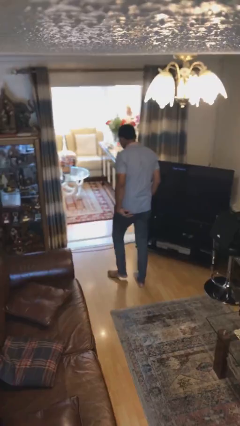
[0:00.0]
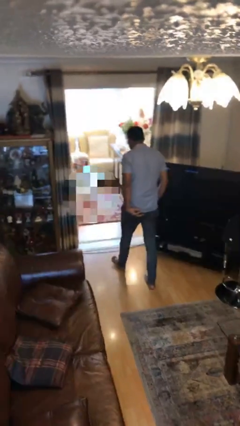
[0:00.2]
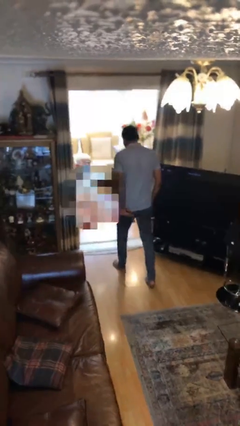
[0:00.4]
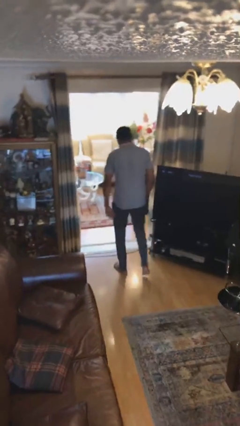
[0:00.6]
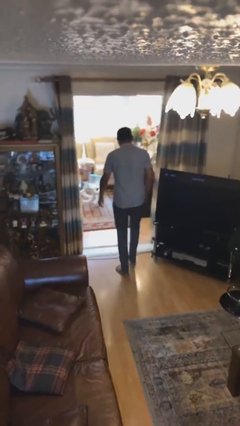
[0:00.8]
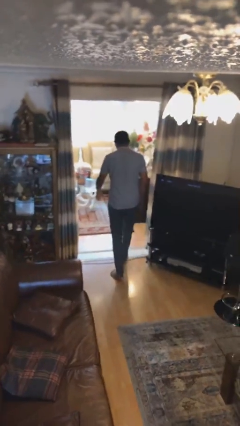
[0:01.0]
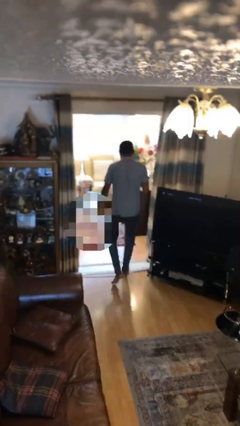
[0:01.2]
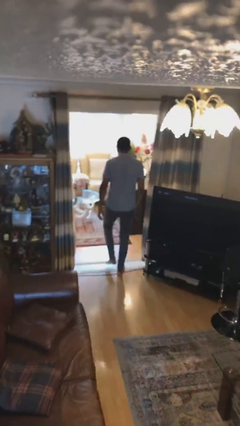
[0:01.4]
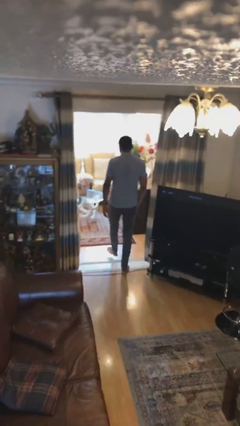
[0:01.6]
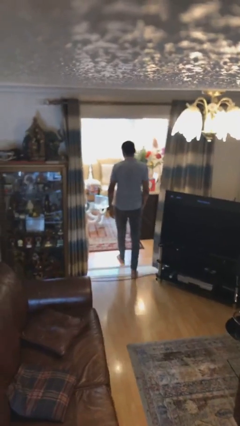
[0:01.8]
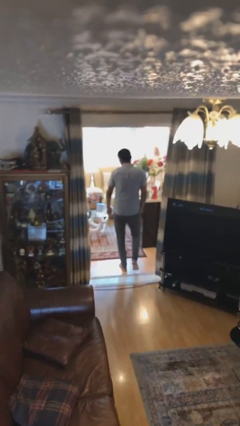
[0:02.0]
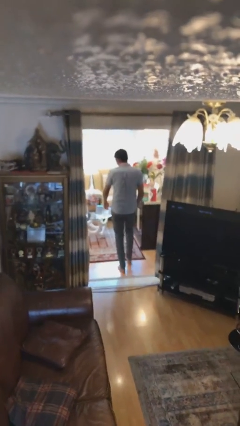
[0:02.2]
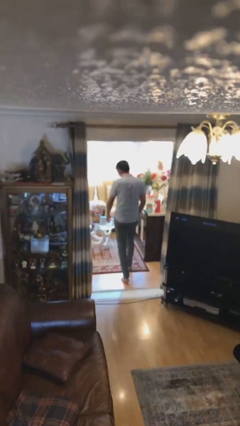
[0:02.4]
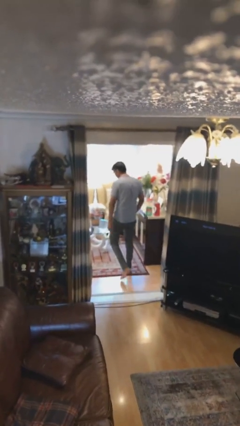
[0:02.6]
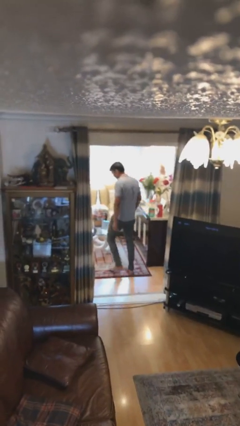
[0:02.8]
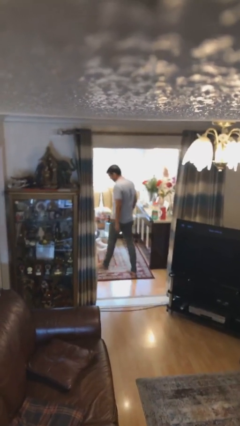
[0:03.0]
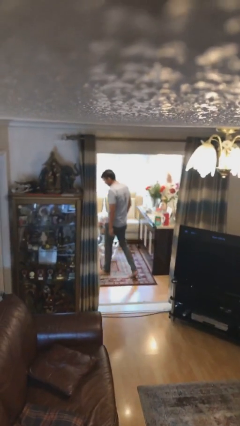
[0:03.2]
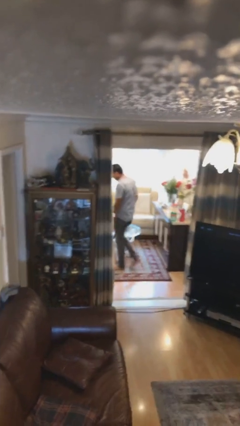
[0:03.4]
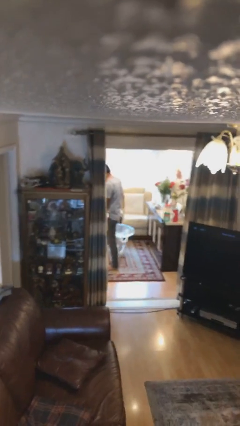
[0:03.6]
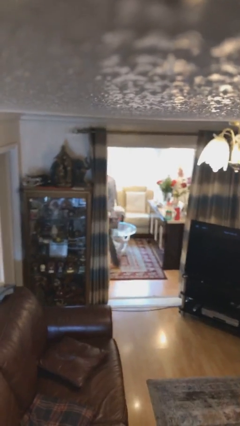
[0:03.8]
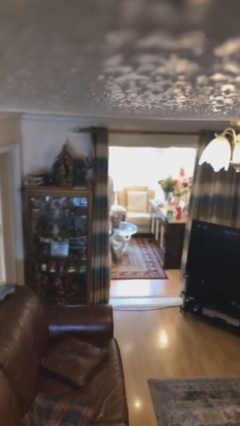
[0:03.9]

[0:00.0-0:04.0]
person exits scene through structure

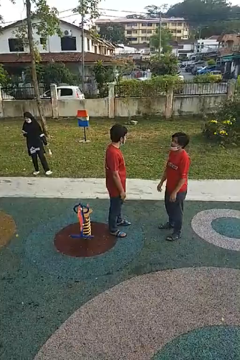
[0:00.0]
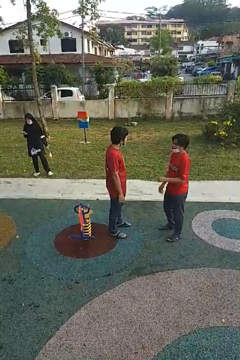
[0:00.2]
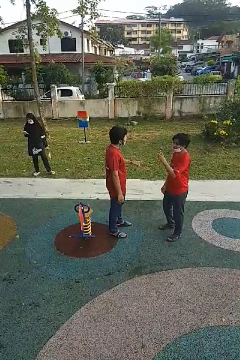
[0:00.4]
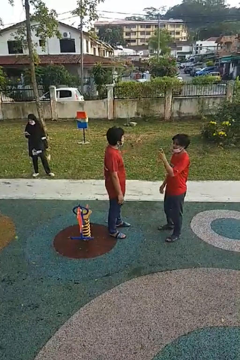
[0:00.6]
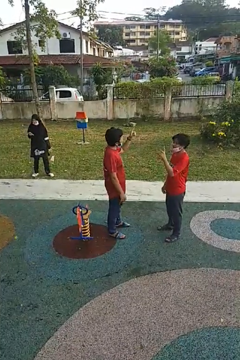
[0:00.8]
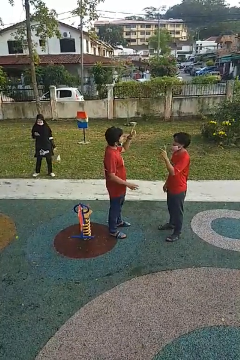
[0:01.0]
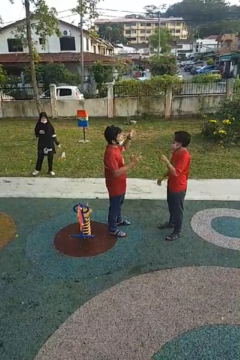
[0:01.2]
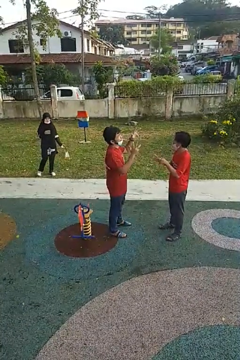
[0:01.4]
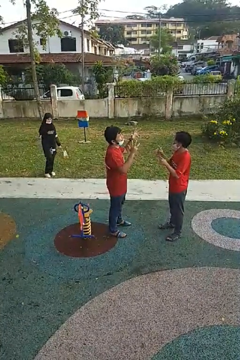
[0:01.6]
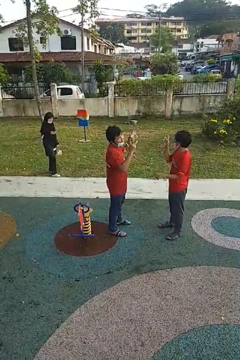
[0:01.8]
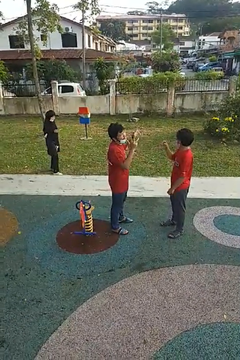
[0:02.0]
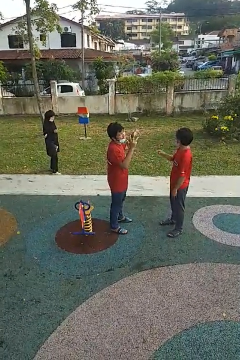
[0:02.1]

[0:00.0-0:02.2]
person talks to person

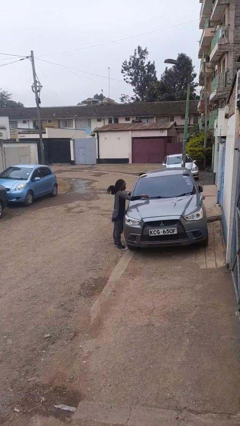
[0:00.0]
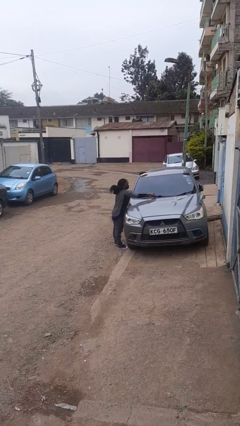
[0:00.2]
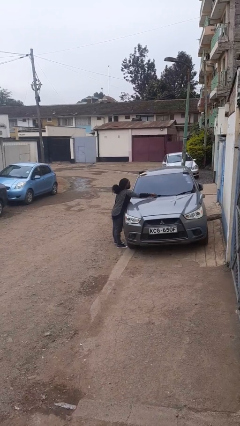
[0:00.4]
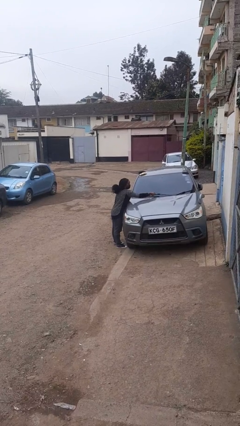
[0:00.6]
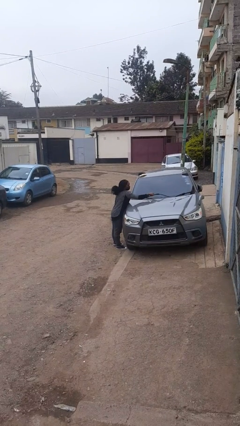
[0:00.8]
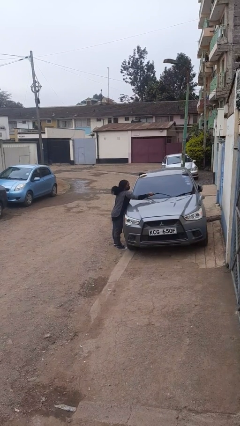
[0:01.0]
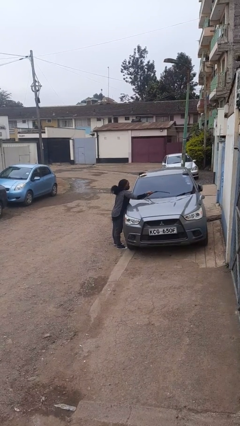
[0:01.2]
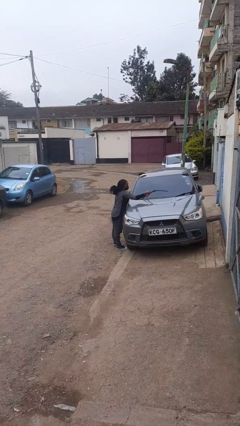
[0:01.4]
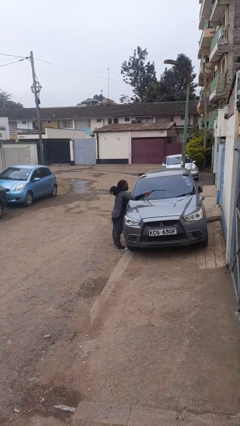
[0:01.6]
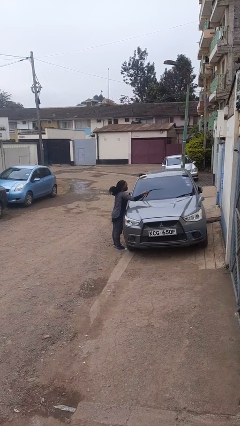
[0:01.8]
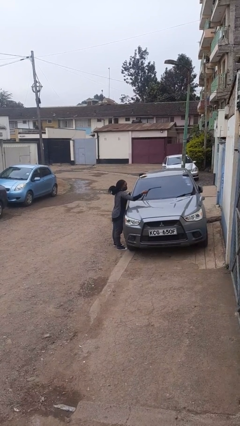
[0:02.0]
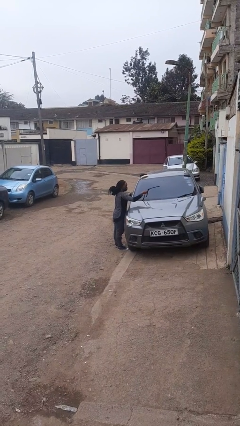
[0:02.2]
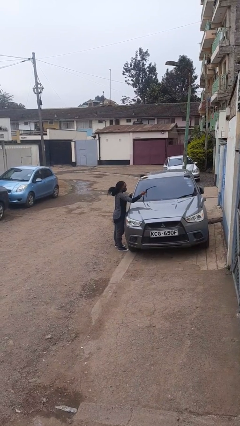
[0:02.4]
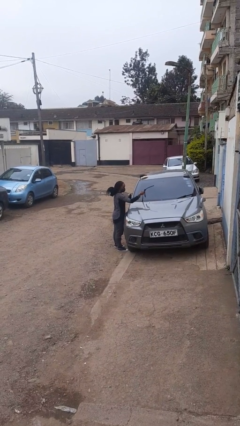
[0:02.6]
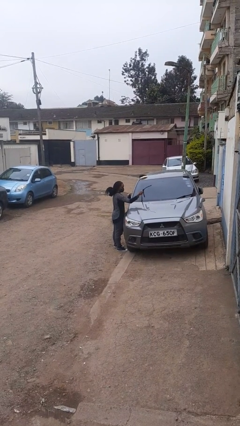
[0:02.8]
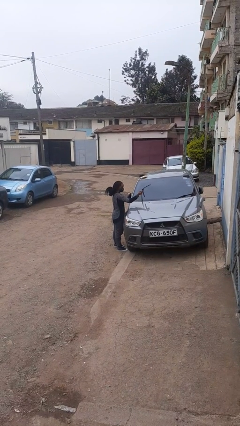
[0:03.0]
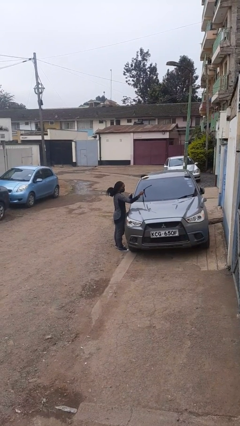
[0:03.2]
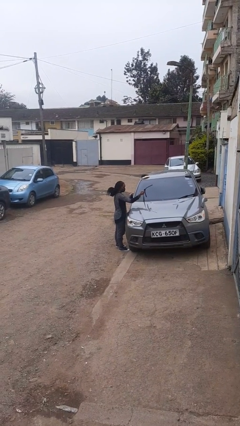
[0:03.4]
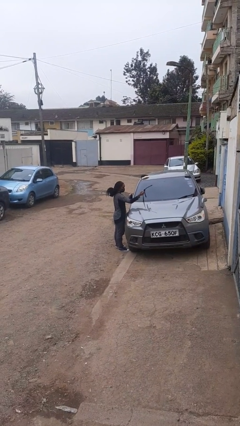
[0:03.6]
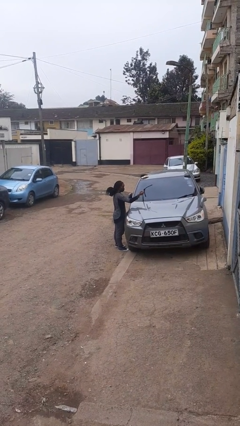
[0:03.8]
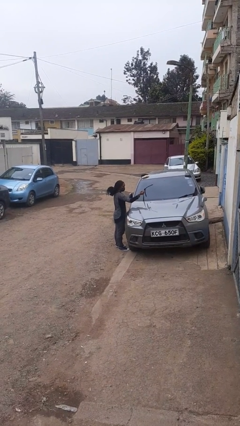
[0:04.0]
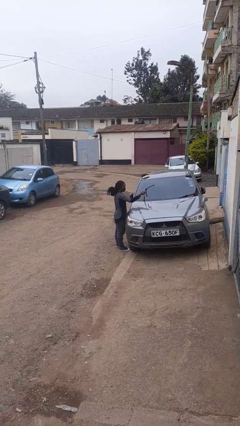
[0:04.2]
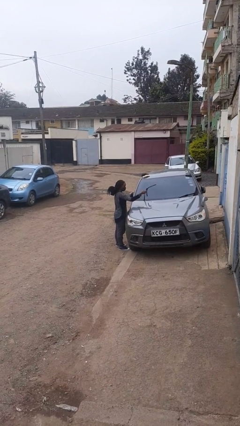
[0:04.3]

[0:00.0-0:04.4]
person flips up car wipers

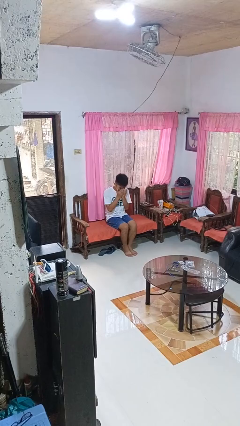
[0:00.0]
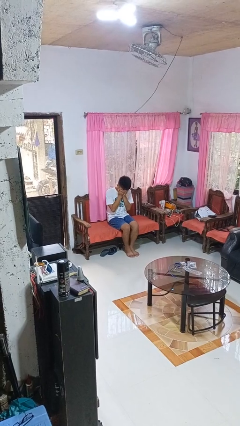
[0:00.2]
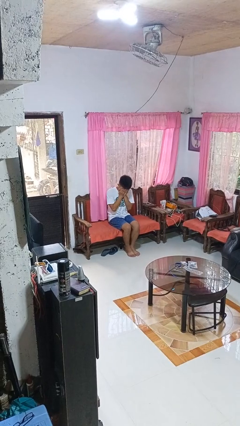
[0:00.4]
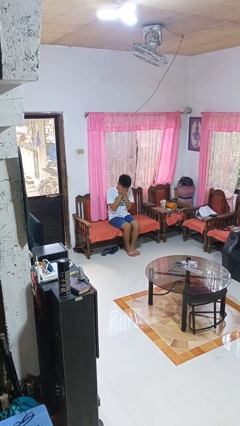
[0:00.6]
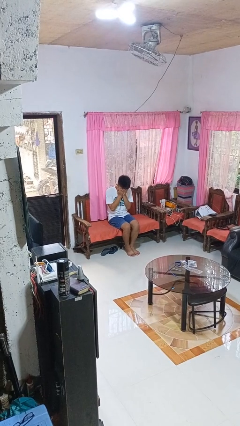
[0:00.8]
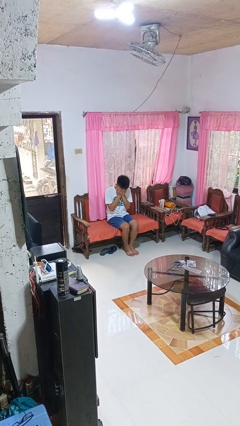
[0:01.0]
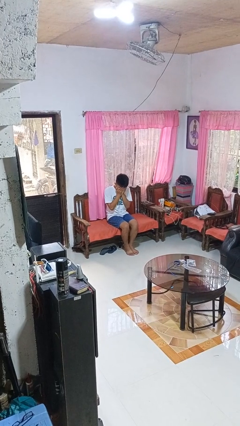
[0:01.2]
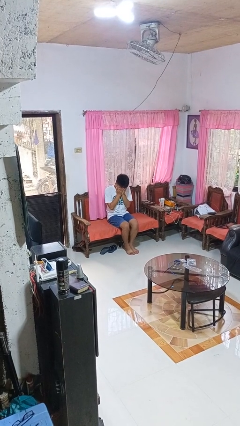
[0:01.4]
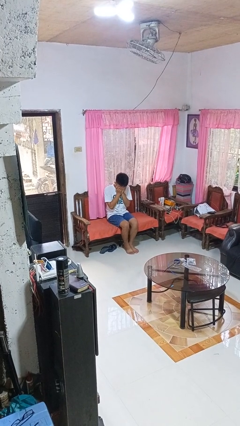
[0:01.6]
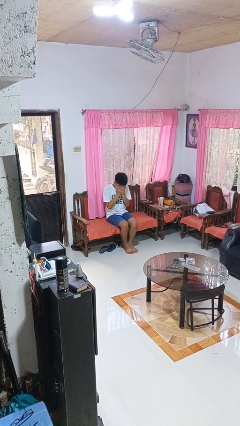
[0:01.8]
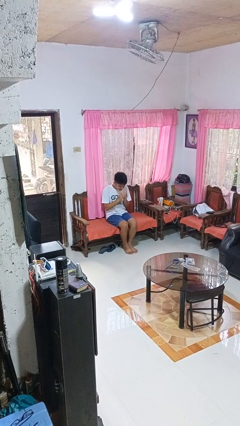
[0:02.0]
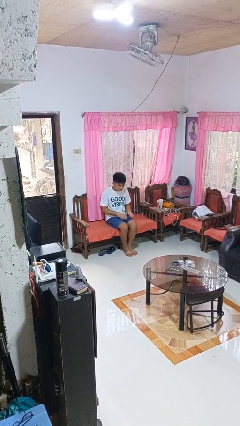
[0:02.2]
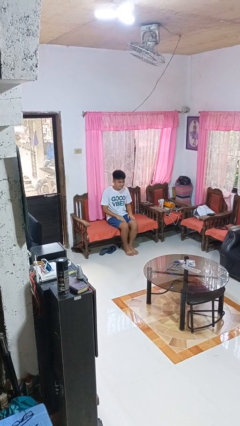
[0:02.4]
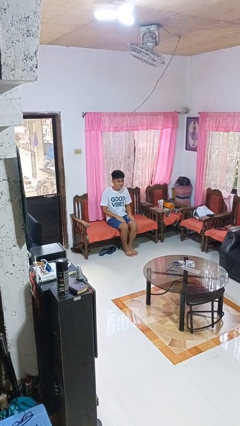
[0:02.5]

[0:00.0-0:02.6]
person covers face with hands

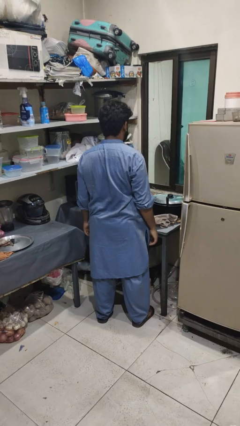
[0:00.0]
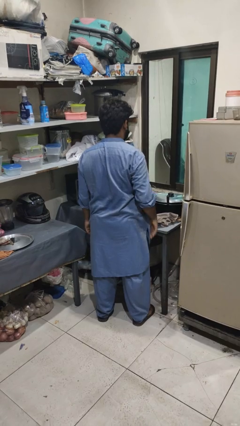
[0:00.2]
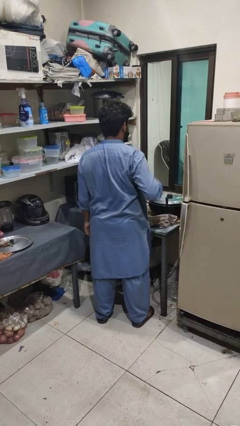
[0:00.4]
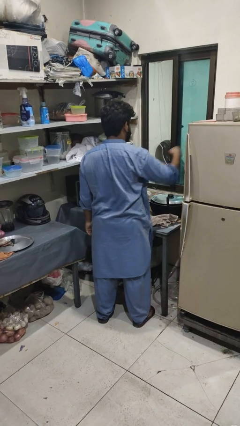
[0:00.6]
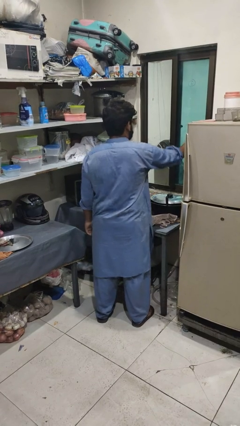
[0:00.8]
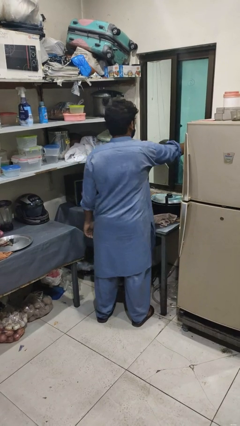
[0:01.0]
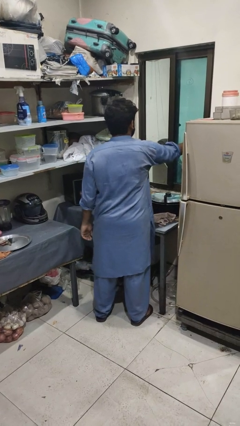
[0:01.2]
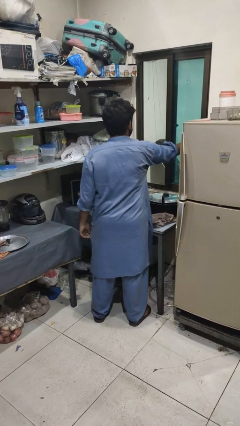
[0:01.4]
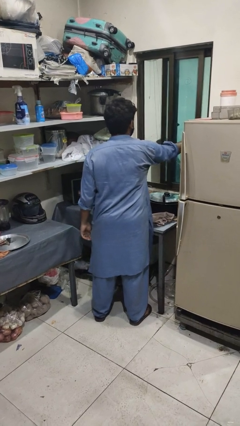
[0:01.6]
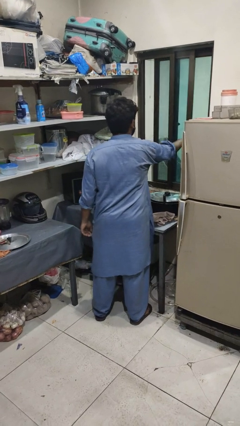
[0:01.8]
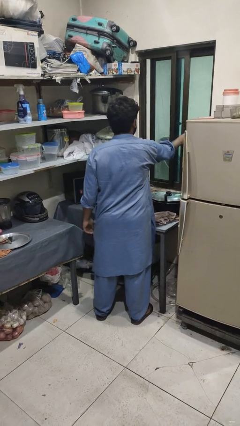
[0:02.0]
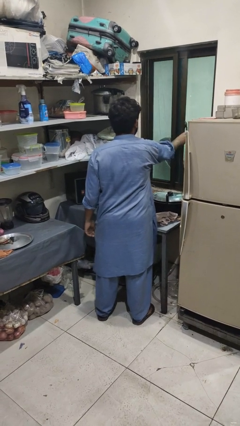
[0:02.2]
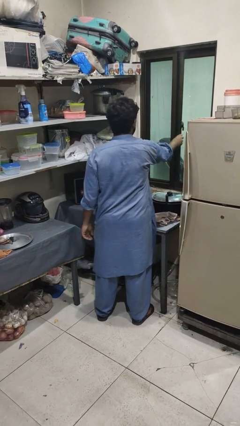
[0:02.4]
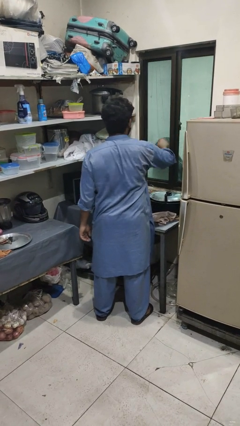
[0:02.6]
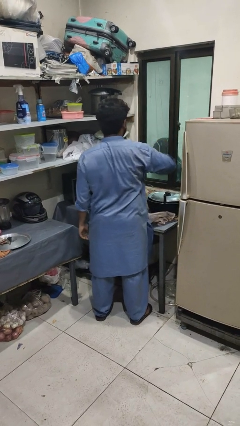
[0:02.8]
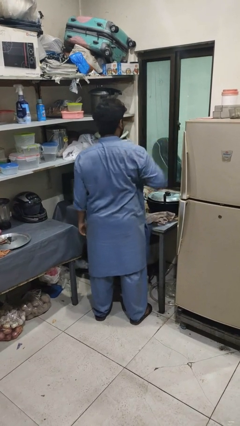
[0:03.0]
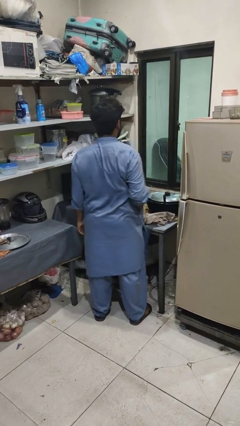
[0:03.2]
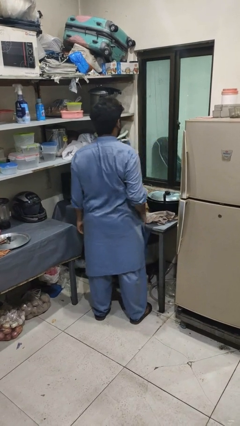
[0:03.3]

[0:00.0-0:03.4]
person closes home window

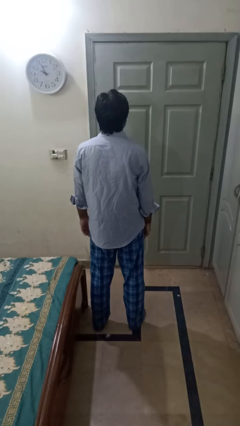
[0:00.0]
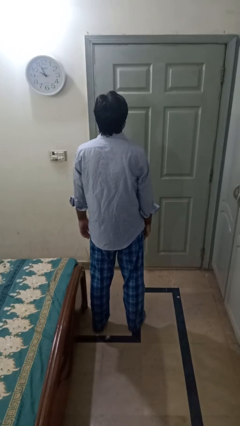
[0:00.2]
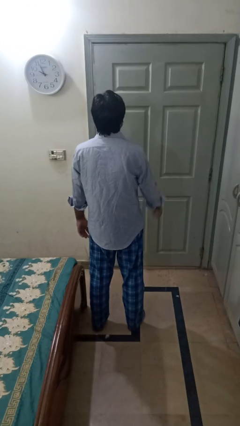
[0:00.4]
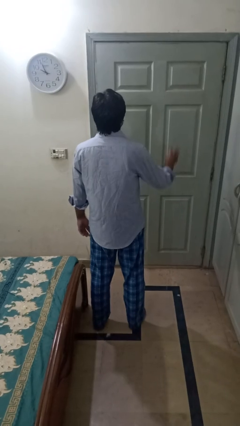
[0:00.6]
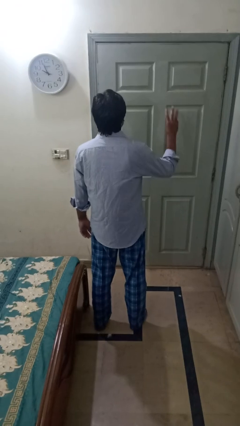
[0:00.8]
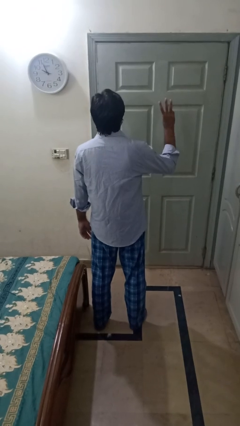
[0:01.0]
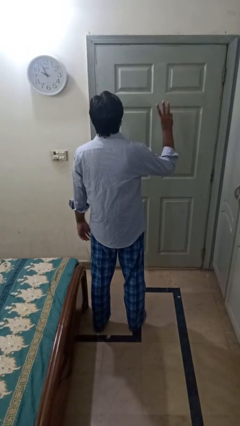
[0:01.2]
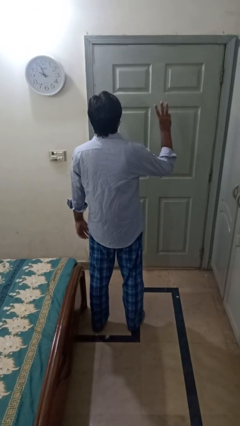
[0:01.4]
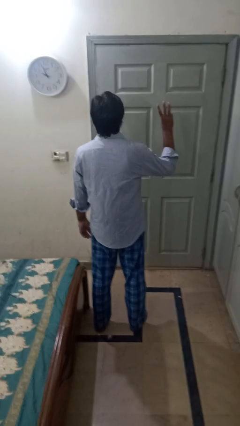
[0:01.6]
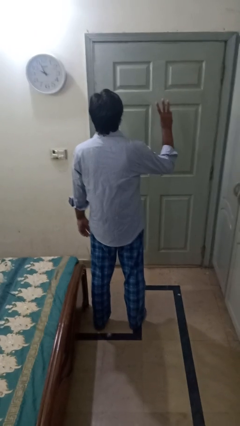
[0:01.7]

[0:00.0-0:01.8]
person gestures number three
